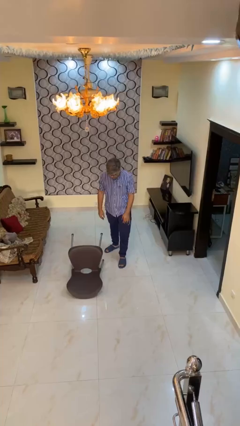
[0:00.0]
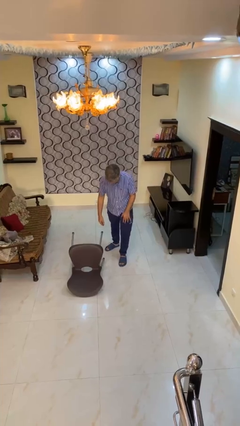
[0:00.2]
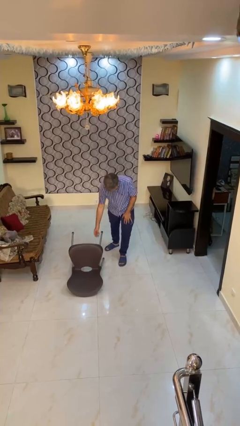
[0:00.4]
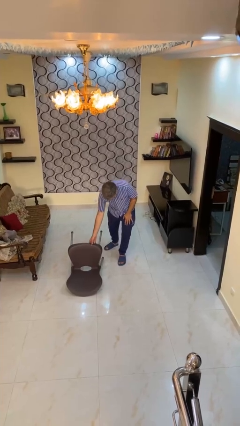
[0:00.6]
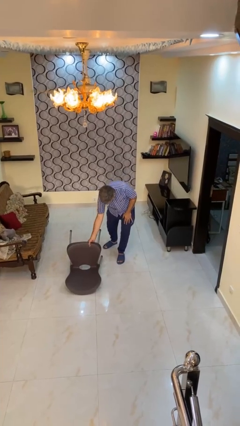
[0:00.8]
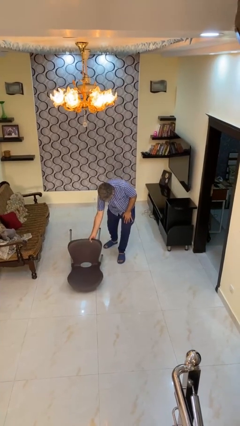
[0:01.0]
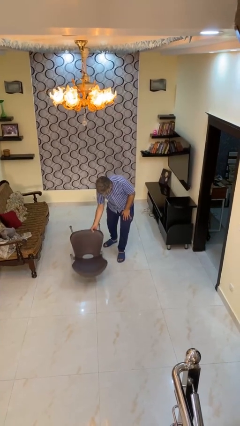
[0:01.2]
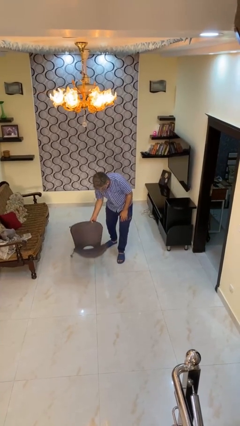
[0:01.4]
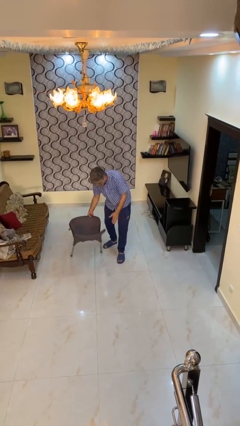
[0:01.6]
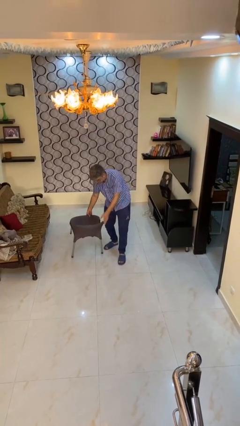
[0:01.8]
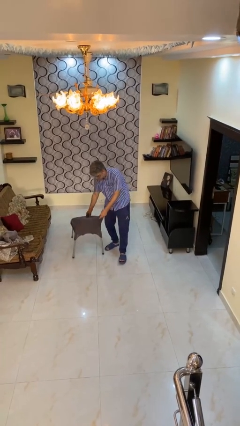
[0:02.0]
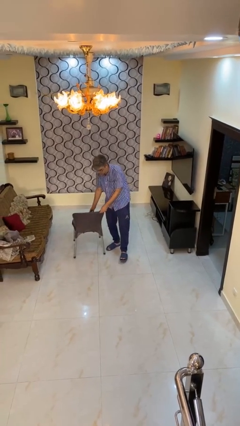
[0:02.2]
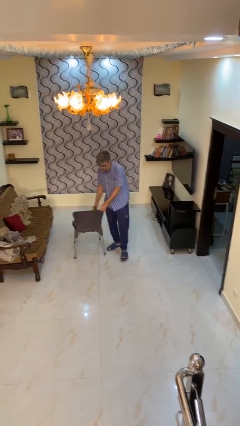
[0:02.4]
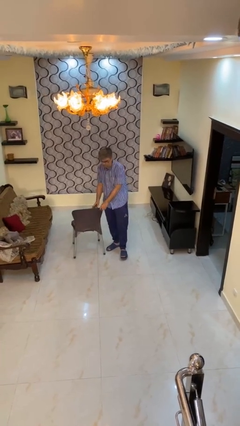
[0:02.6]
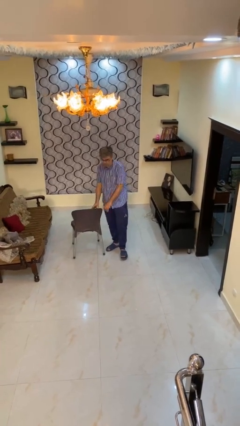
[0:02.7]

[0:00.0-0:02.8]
person sets upright furniture

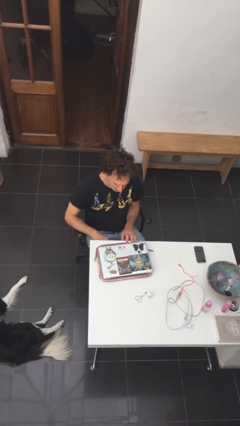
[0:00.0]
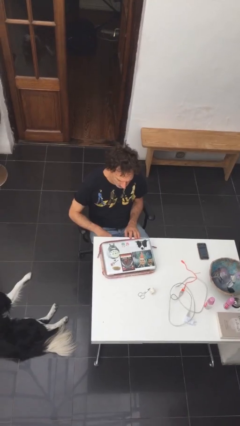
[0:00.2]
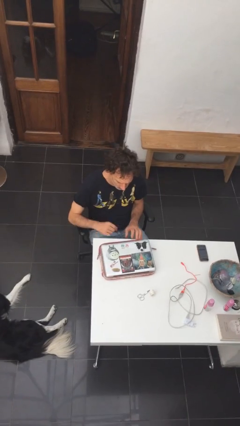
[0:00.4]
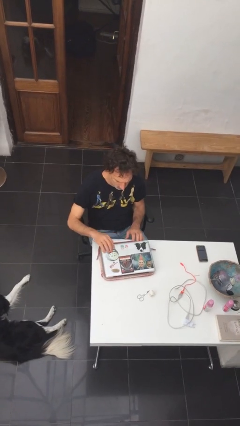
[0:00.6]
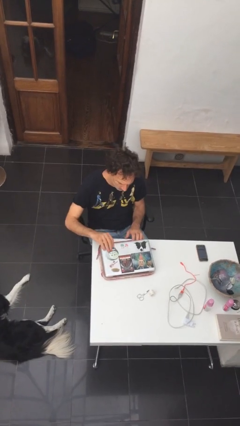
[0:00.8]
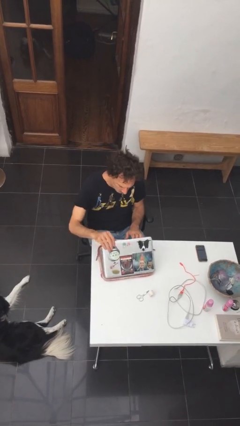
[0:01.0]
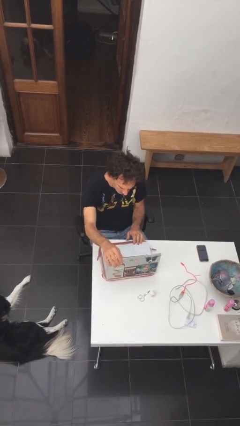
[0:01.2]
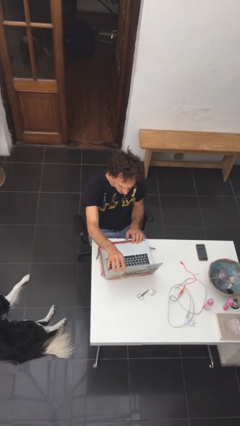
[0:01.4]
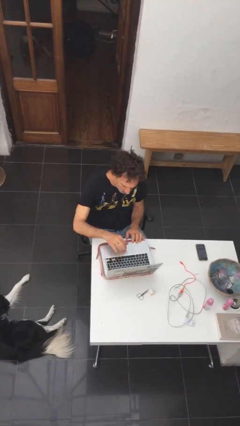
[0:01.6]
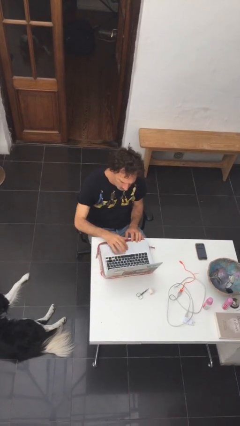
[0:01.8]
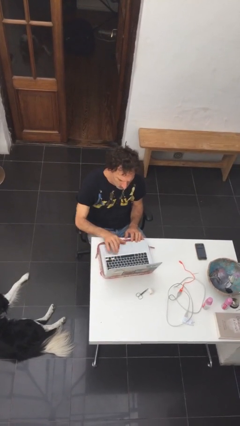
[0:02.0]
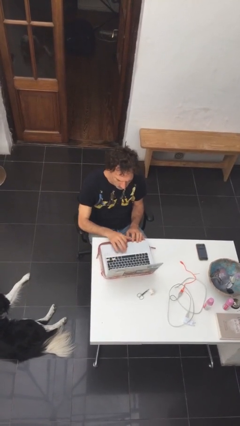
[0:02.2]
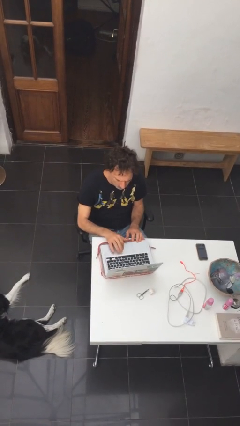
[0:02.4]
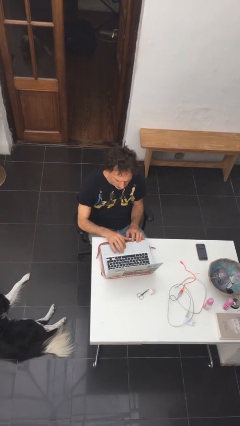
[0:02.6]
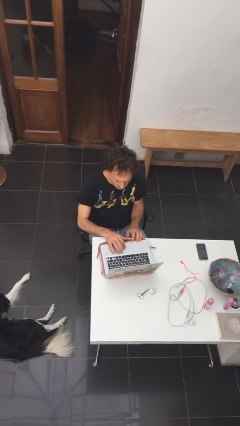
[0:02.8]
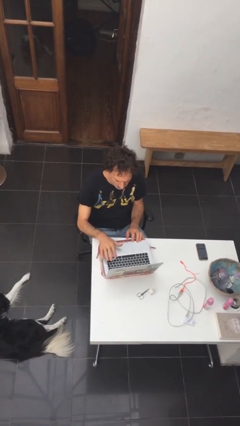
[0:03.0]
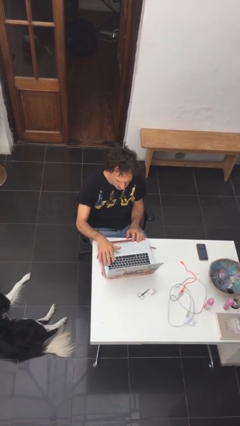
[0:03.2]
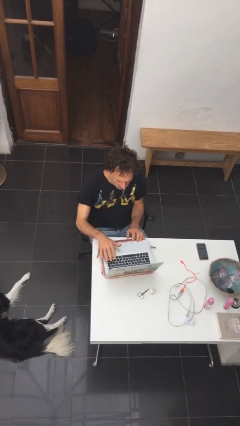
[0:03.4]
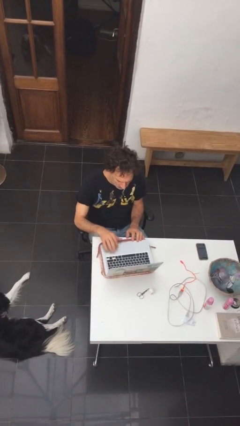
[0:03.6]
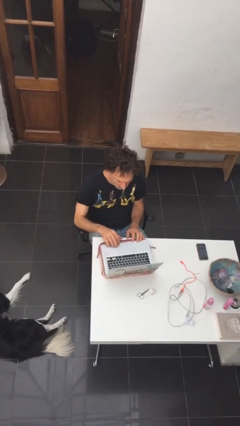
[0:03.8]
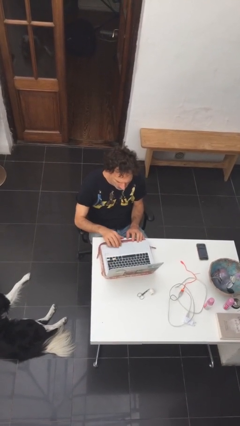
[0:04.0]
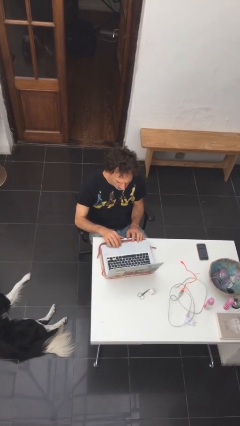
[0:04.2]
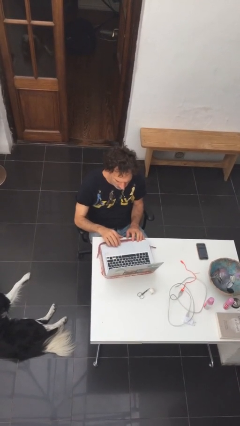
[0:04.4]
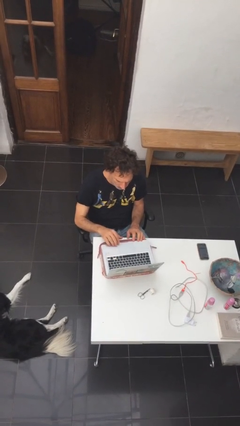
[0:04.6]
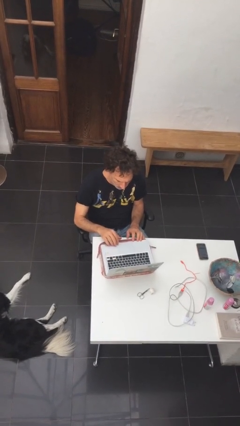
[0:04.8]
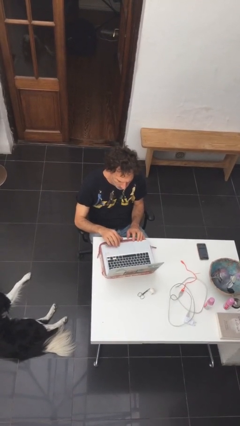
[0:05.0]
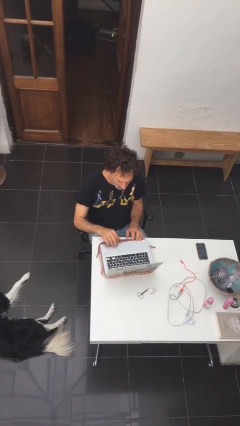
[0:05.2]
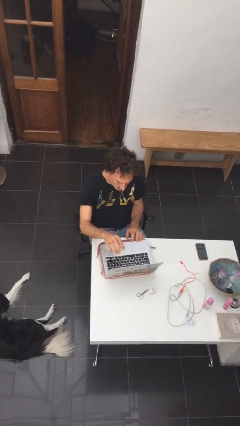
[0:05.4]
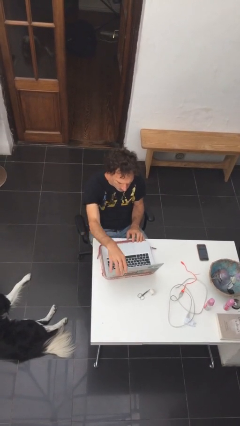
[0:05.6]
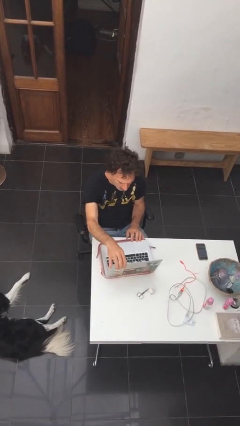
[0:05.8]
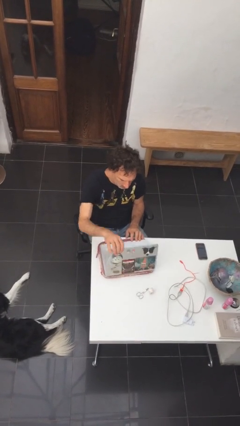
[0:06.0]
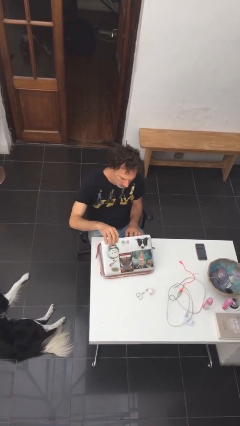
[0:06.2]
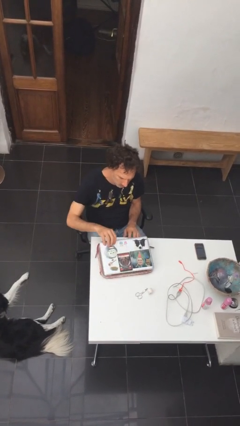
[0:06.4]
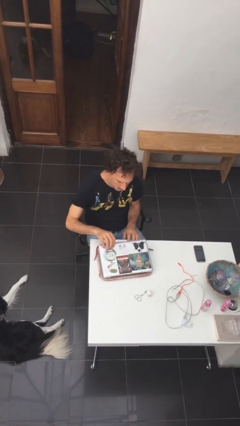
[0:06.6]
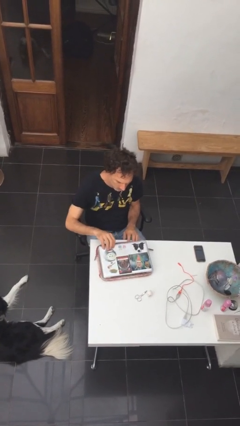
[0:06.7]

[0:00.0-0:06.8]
person interacts with laptop

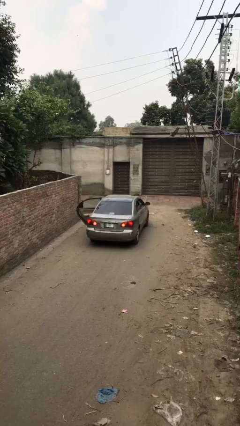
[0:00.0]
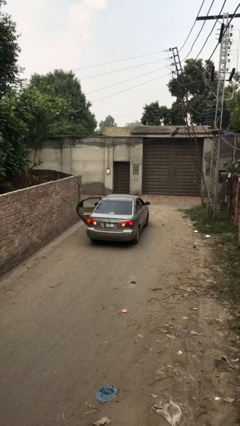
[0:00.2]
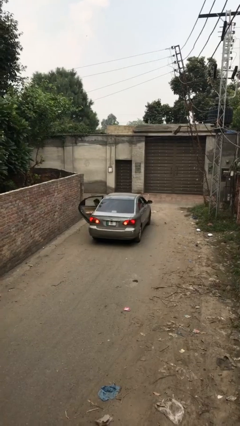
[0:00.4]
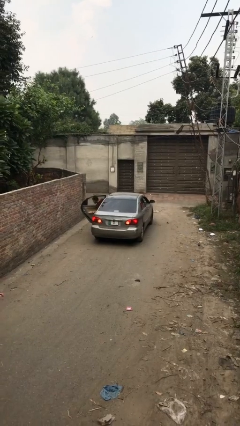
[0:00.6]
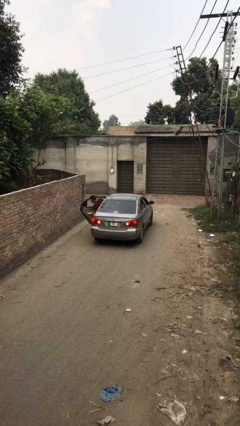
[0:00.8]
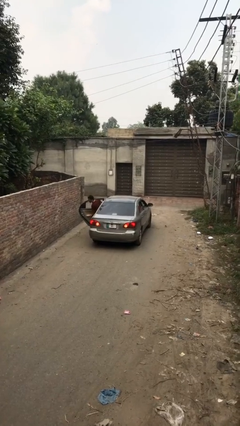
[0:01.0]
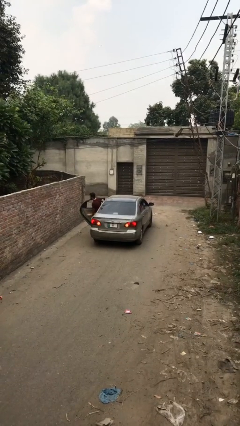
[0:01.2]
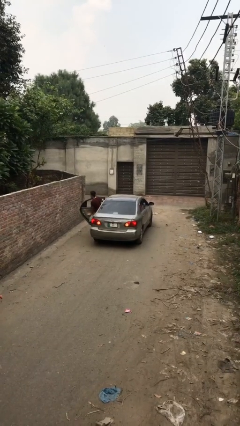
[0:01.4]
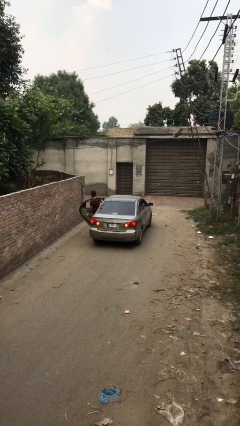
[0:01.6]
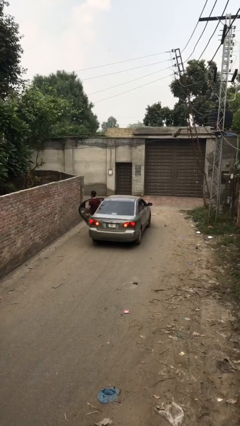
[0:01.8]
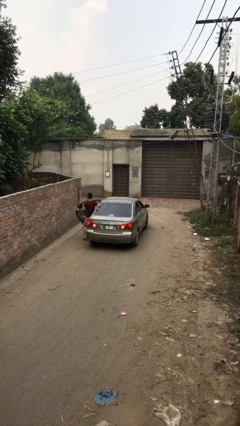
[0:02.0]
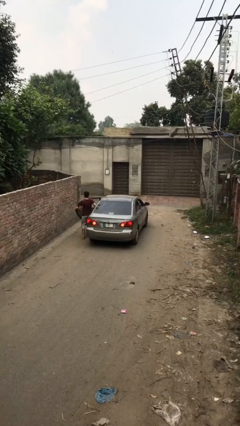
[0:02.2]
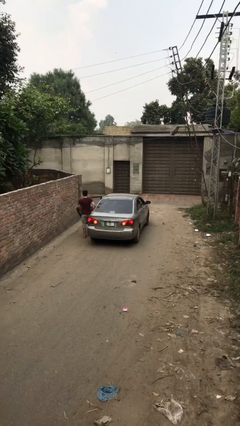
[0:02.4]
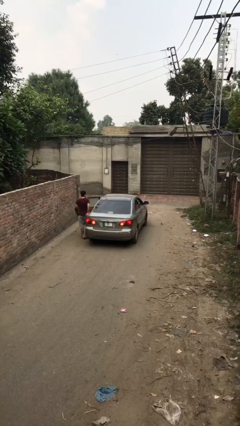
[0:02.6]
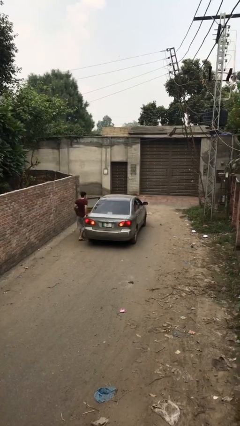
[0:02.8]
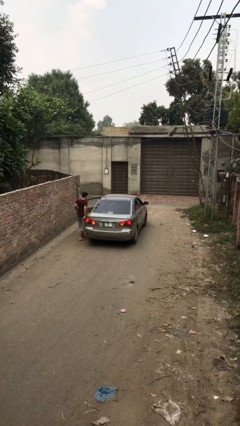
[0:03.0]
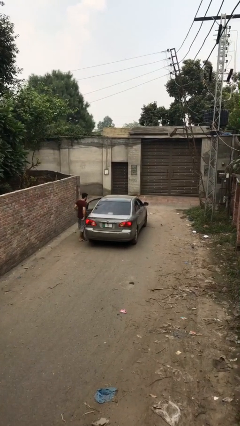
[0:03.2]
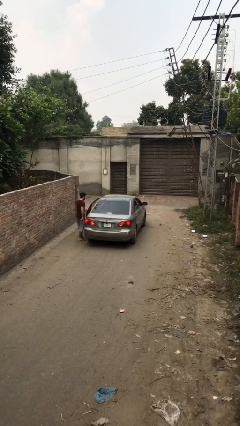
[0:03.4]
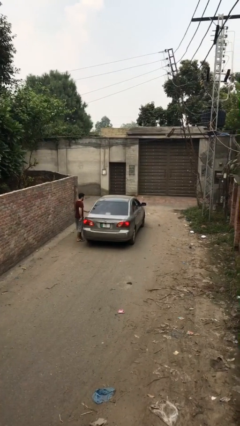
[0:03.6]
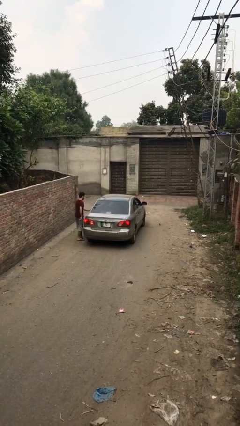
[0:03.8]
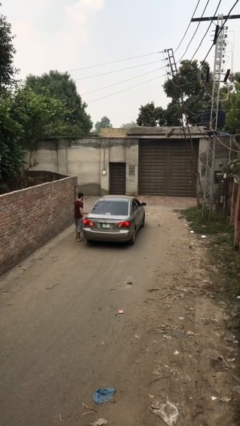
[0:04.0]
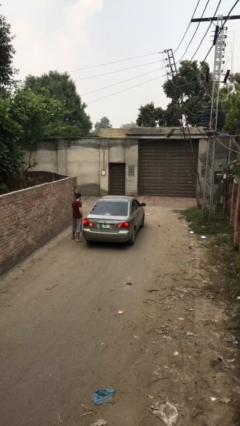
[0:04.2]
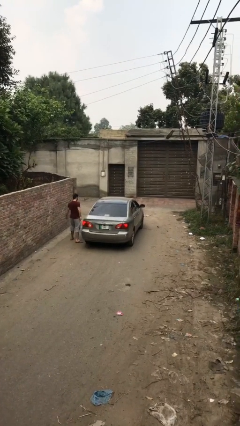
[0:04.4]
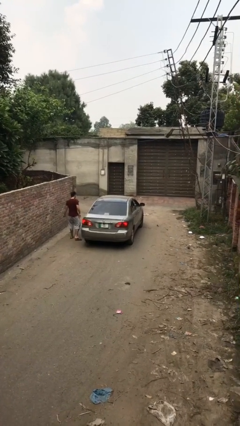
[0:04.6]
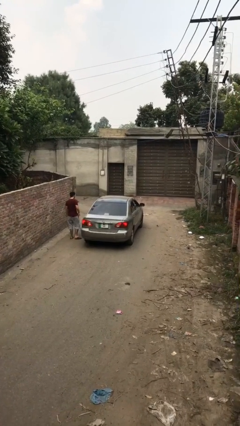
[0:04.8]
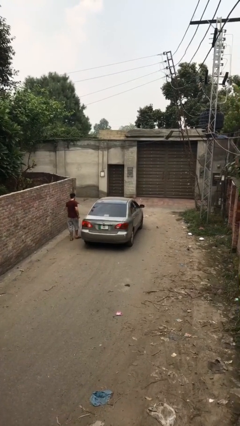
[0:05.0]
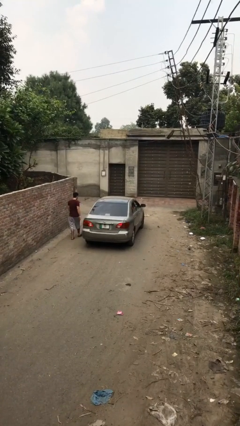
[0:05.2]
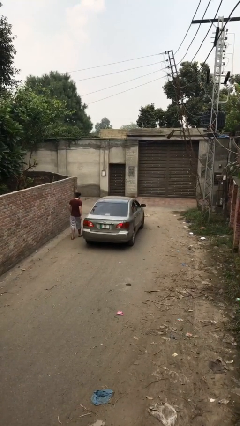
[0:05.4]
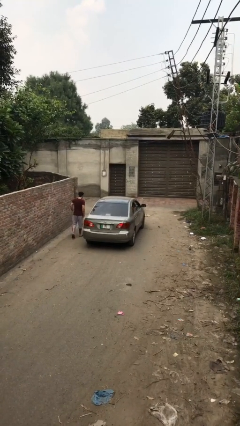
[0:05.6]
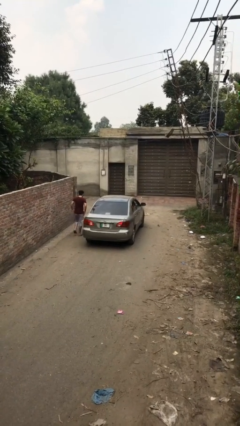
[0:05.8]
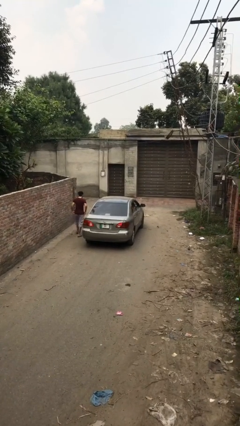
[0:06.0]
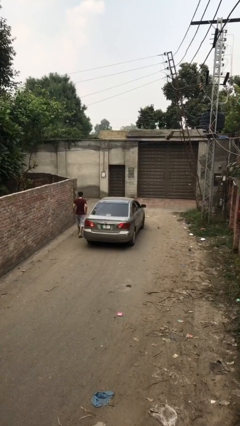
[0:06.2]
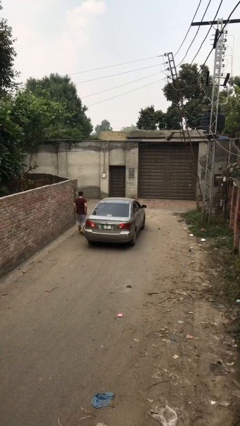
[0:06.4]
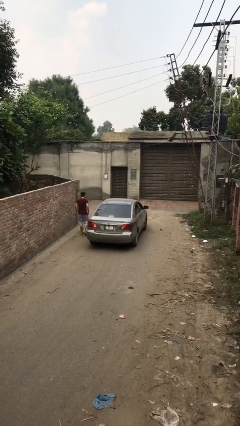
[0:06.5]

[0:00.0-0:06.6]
car drops off person

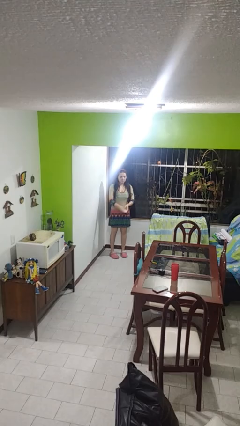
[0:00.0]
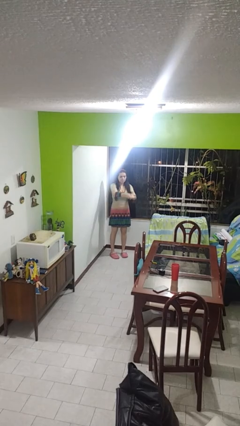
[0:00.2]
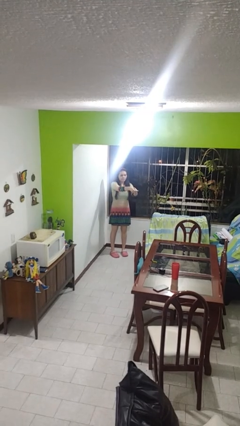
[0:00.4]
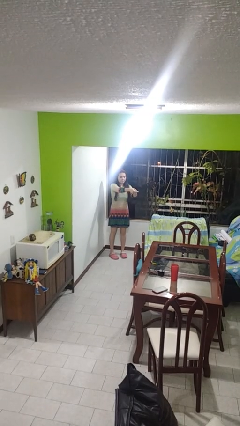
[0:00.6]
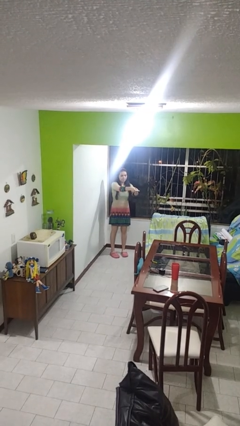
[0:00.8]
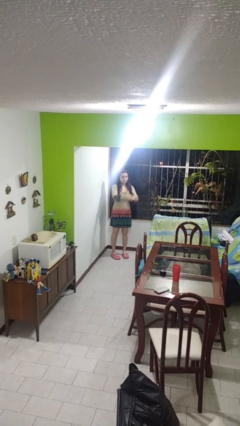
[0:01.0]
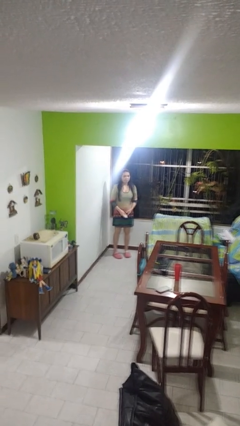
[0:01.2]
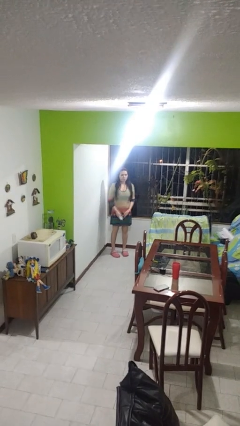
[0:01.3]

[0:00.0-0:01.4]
person uses television remote
